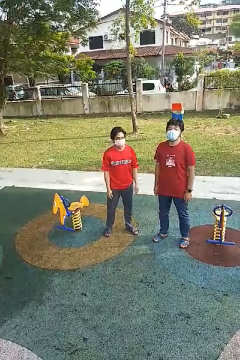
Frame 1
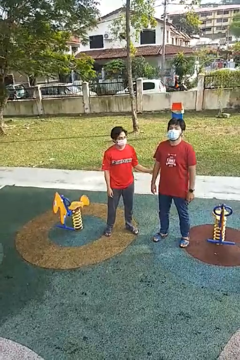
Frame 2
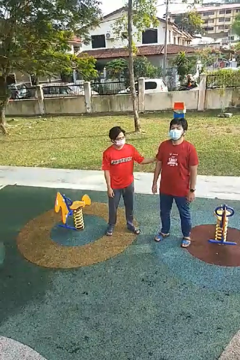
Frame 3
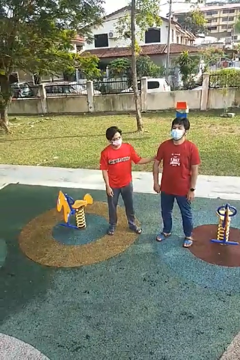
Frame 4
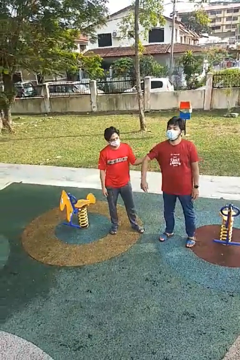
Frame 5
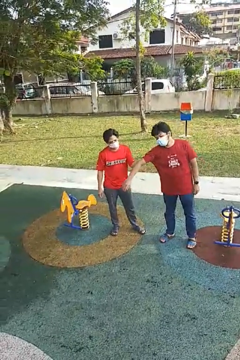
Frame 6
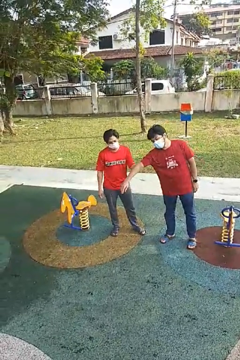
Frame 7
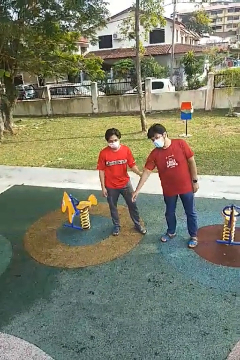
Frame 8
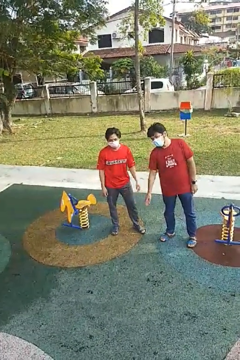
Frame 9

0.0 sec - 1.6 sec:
person grabs person by bicep

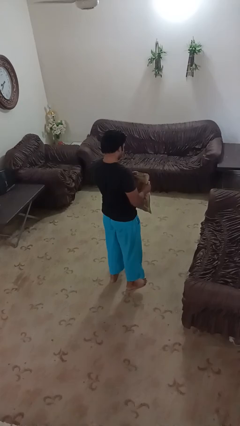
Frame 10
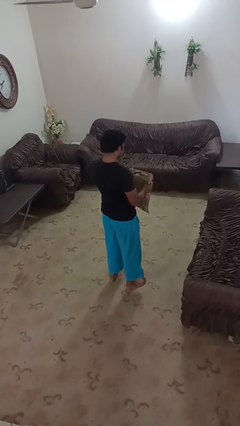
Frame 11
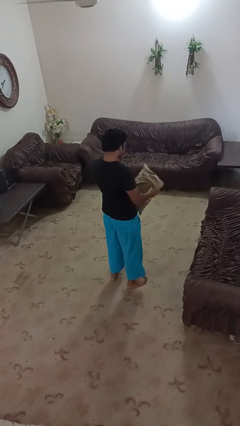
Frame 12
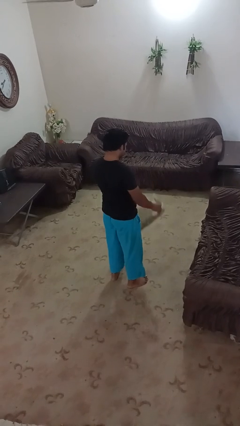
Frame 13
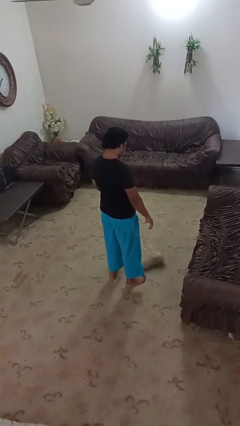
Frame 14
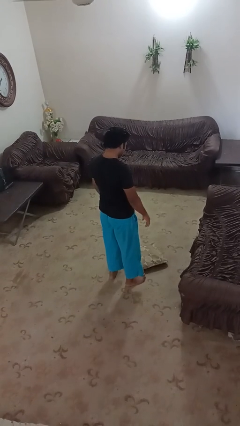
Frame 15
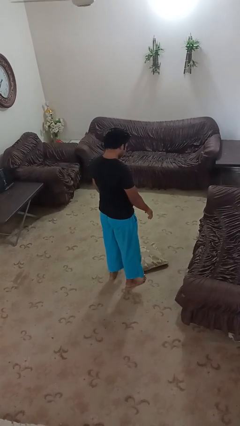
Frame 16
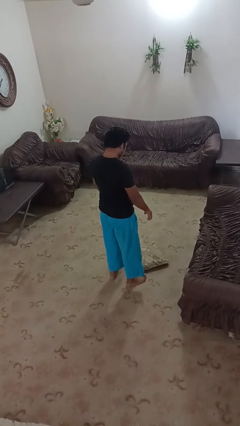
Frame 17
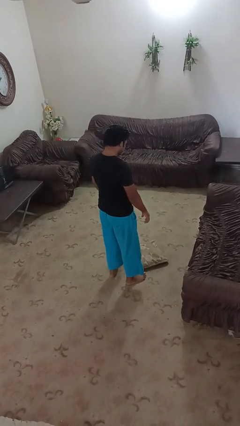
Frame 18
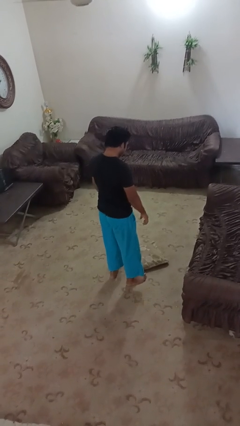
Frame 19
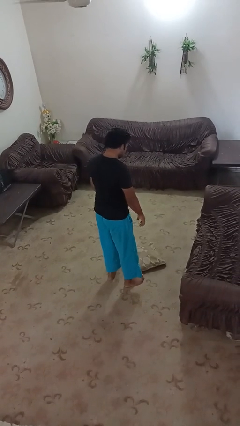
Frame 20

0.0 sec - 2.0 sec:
person drops object

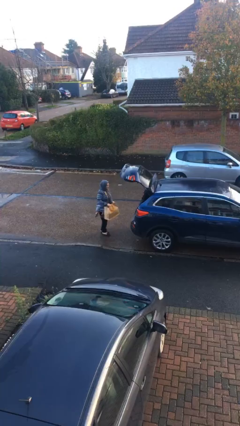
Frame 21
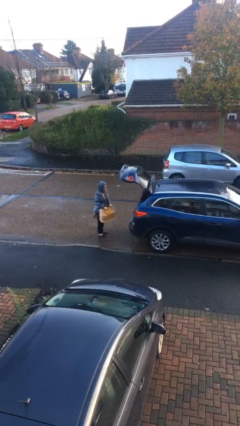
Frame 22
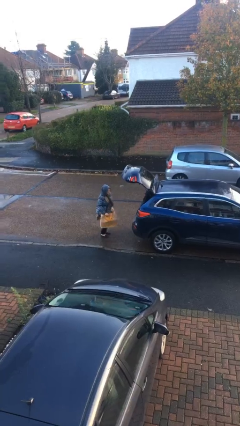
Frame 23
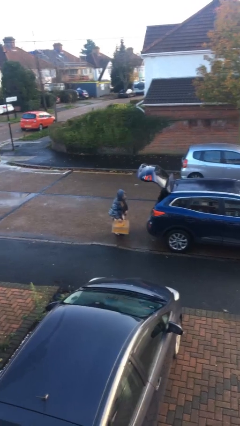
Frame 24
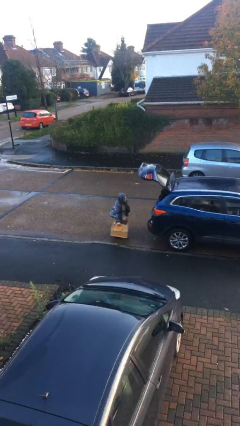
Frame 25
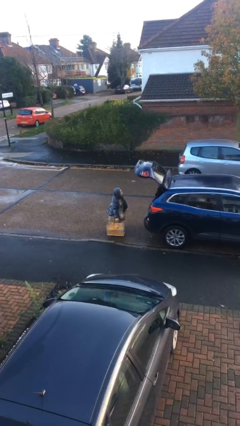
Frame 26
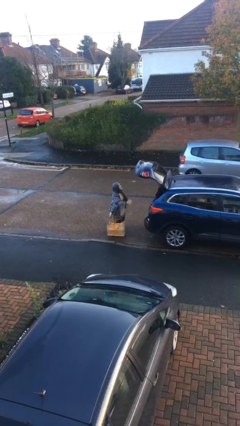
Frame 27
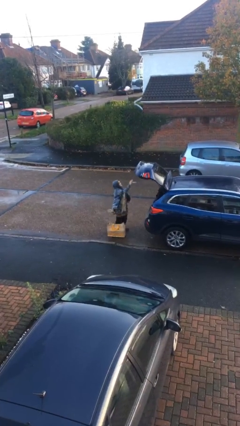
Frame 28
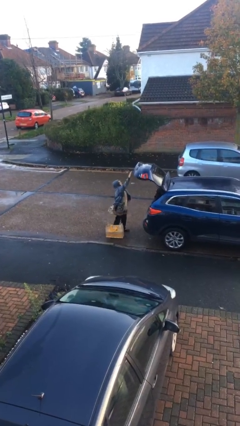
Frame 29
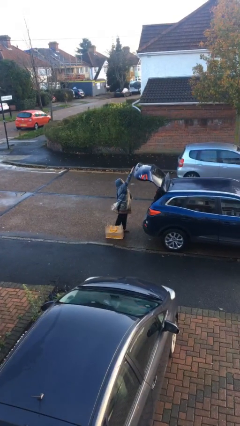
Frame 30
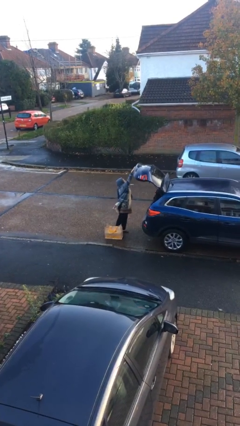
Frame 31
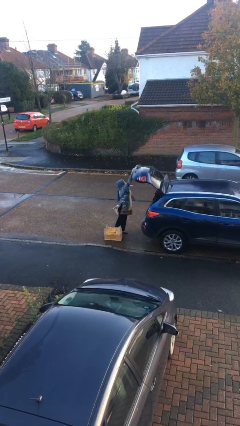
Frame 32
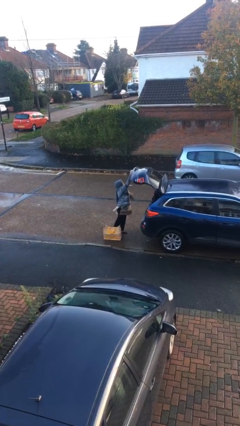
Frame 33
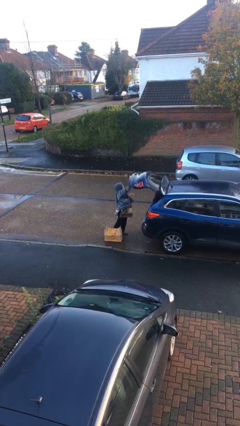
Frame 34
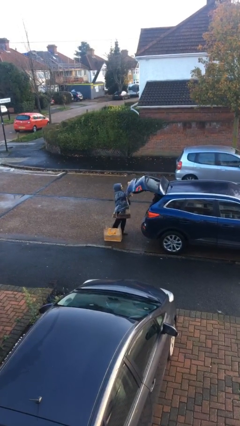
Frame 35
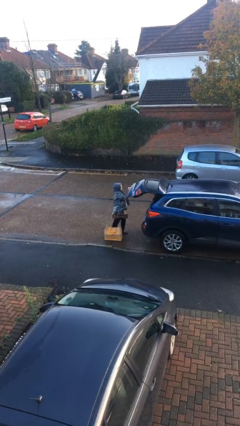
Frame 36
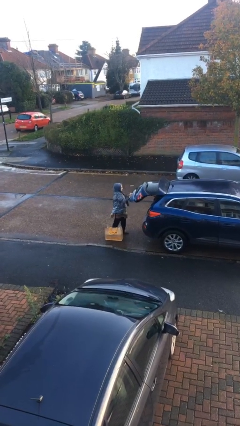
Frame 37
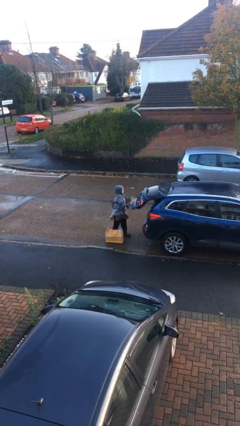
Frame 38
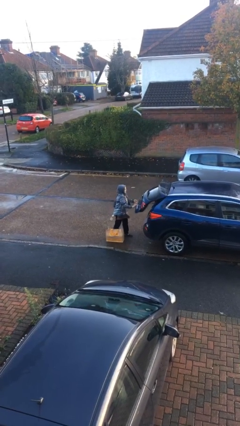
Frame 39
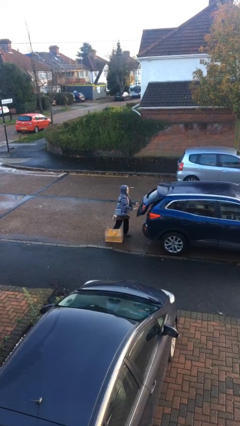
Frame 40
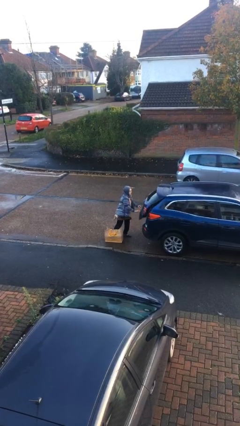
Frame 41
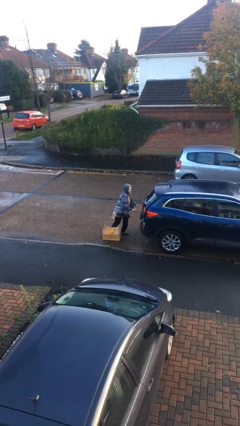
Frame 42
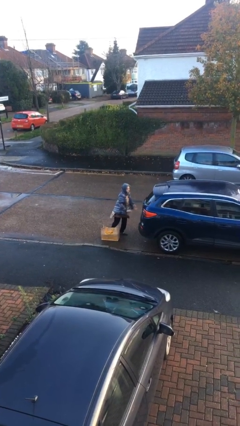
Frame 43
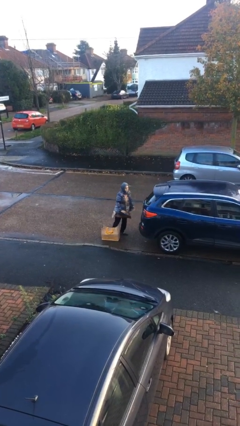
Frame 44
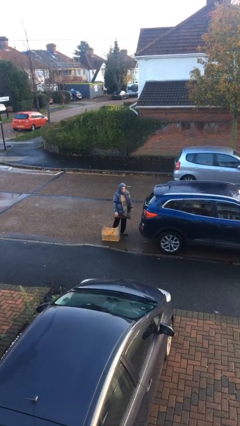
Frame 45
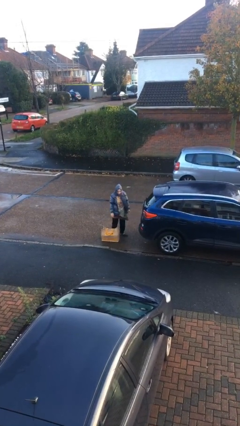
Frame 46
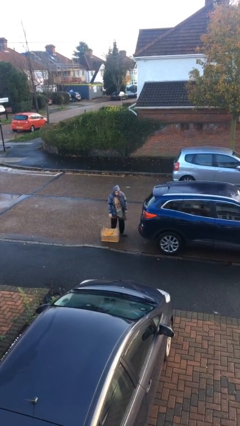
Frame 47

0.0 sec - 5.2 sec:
person closes car trunk

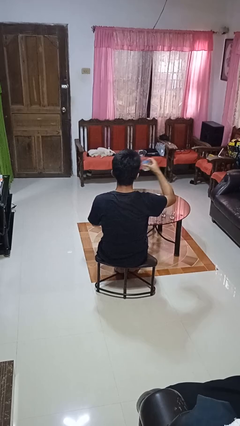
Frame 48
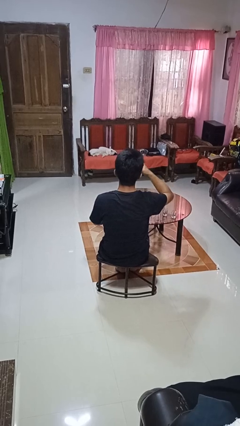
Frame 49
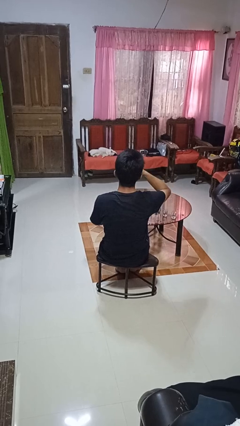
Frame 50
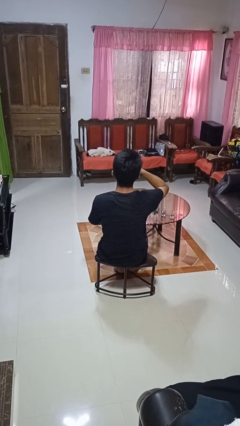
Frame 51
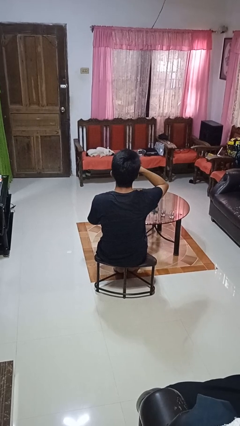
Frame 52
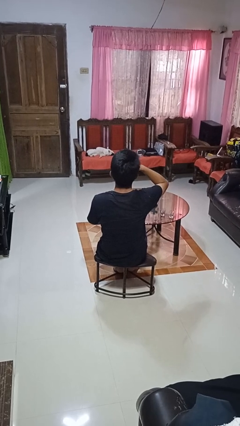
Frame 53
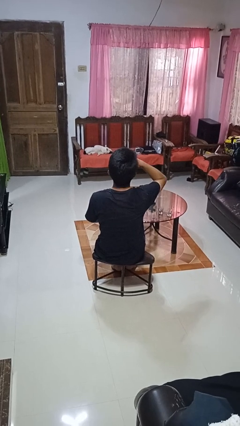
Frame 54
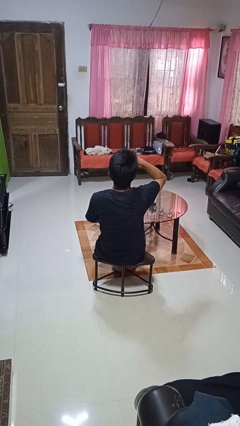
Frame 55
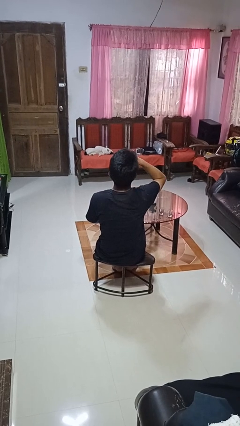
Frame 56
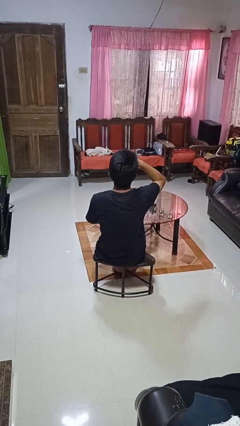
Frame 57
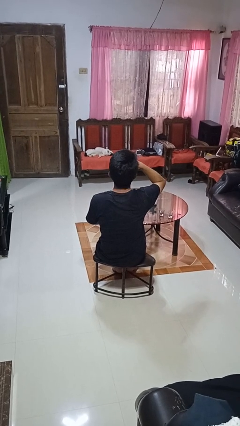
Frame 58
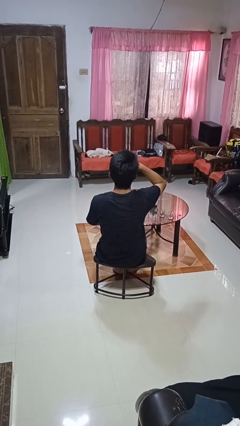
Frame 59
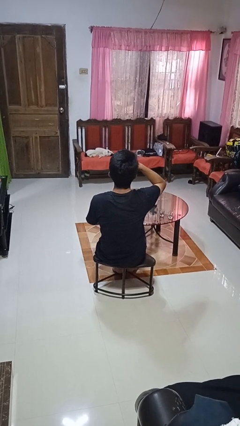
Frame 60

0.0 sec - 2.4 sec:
person drinks from shotglass

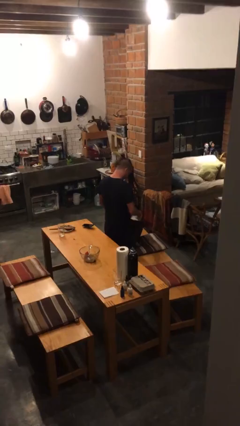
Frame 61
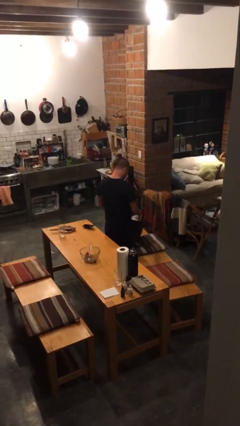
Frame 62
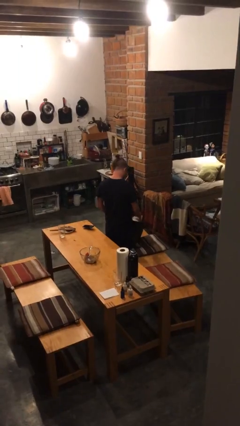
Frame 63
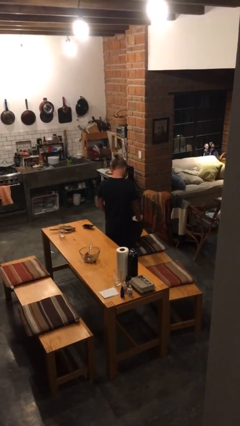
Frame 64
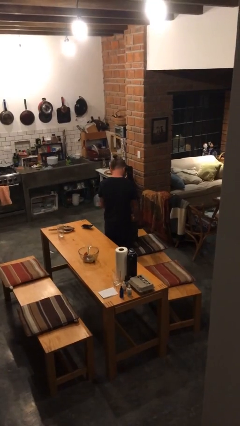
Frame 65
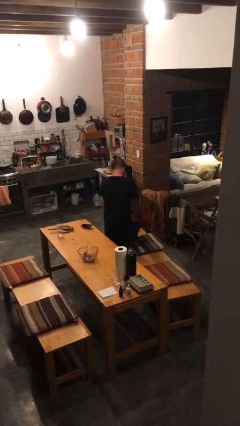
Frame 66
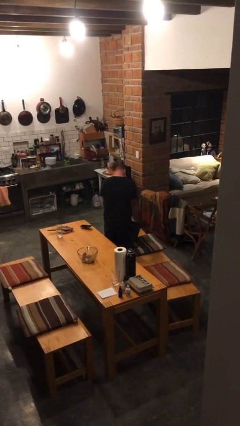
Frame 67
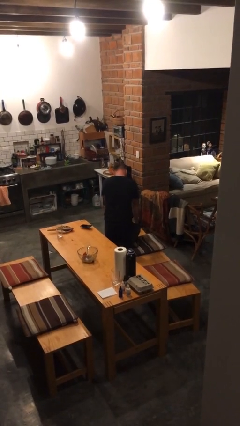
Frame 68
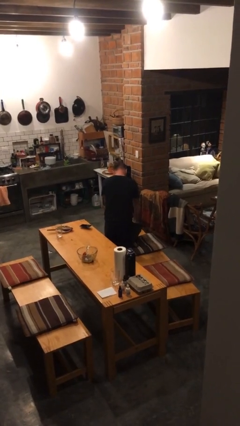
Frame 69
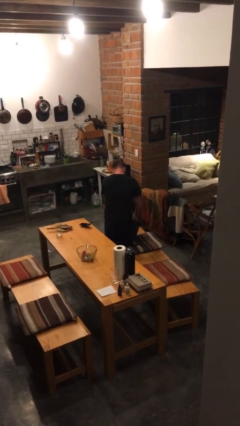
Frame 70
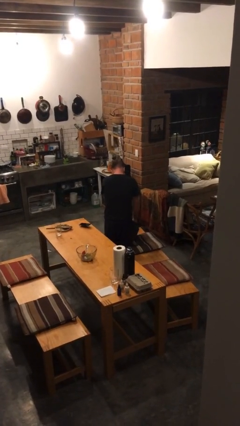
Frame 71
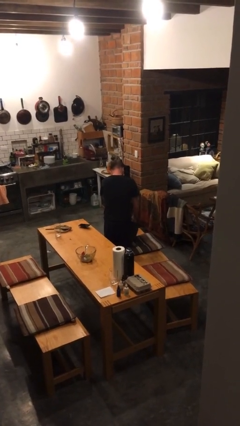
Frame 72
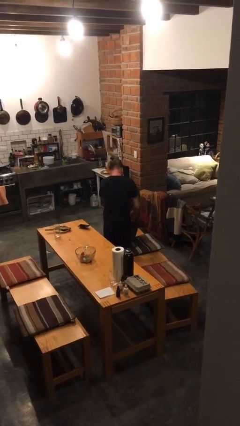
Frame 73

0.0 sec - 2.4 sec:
person searches in bag

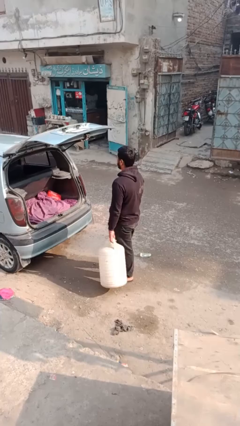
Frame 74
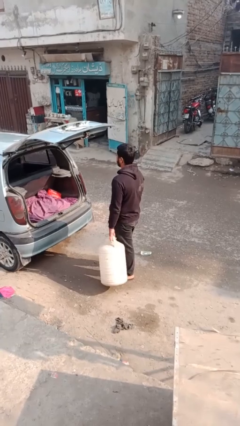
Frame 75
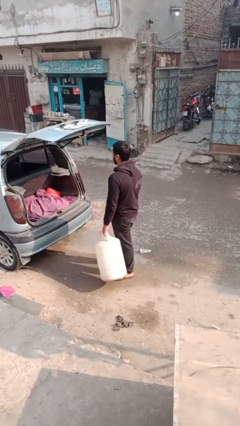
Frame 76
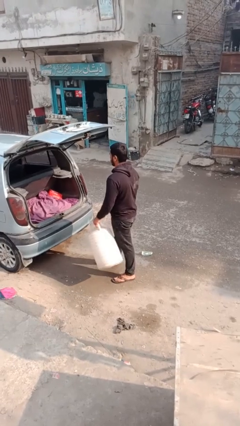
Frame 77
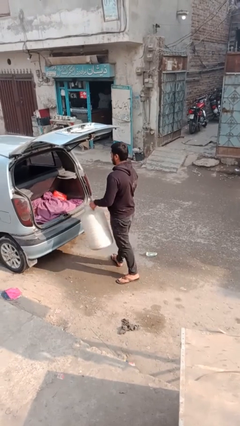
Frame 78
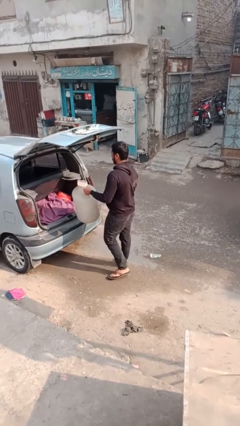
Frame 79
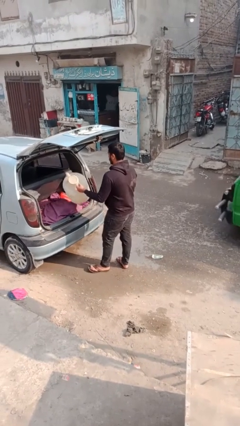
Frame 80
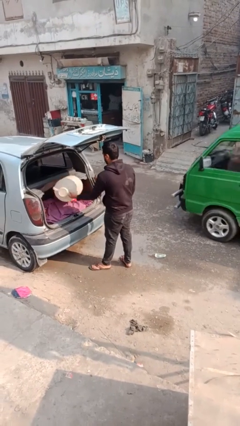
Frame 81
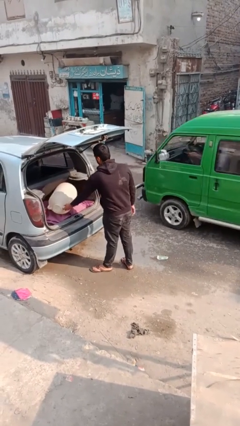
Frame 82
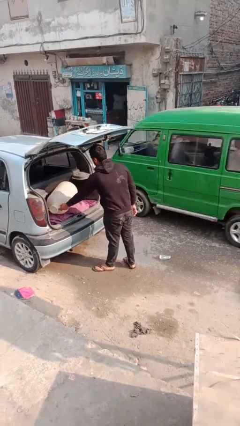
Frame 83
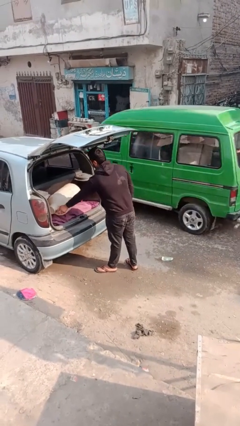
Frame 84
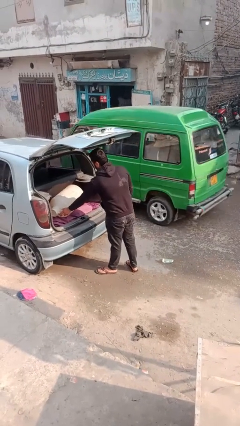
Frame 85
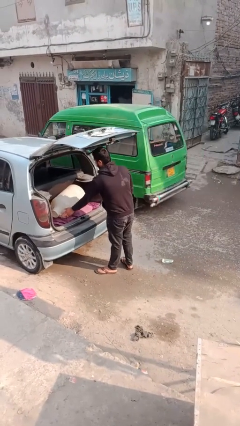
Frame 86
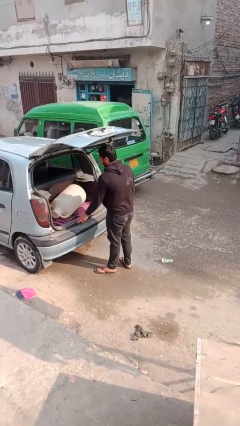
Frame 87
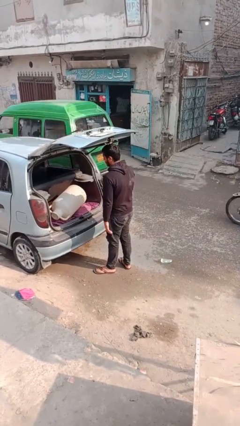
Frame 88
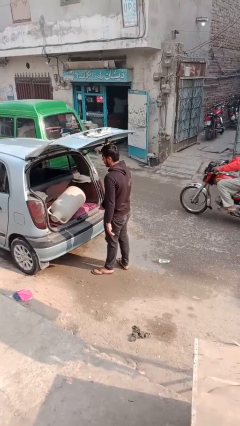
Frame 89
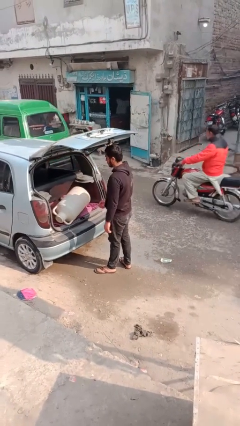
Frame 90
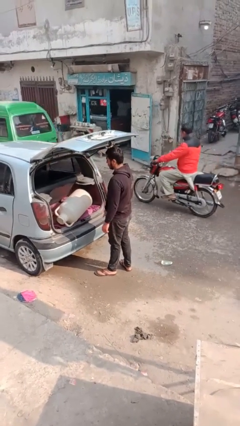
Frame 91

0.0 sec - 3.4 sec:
person loads car

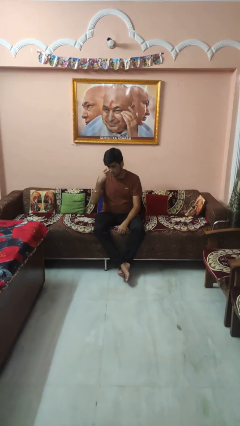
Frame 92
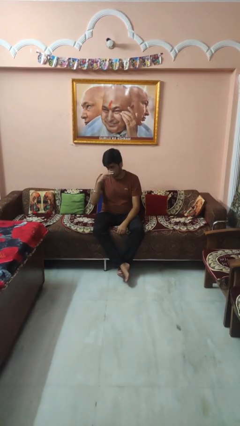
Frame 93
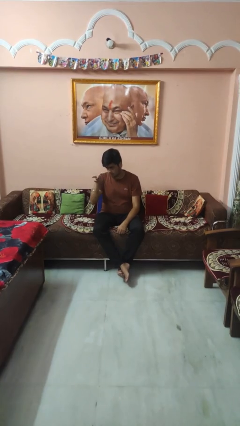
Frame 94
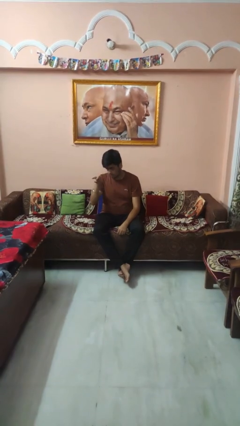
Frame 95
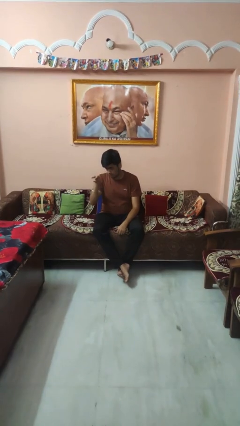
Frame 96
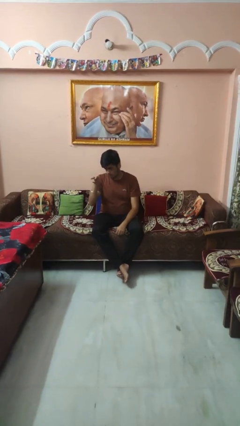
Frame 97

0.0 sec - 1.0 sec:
person gestures watch closely
